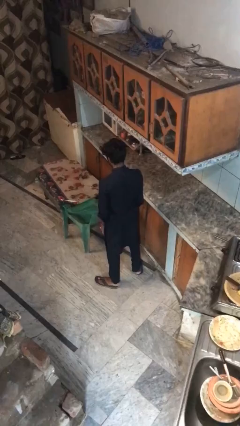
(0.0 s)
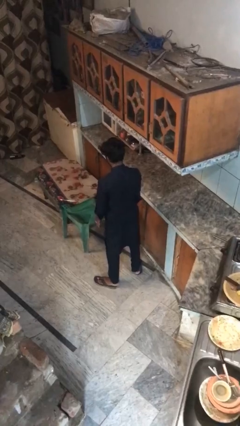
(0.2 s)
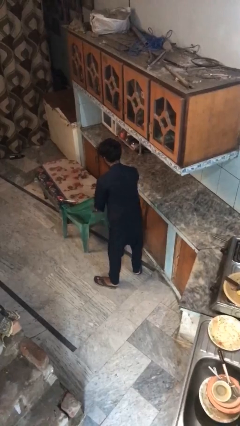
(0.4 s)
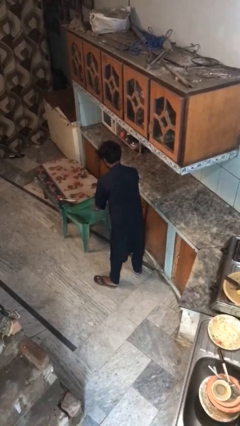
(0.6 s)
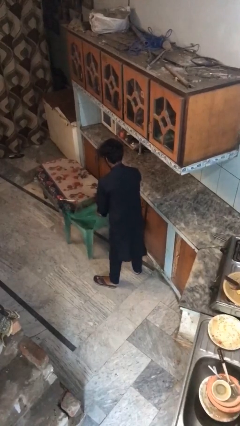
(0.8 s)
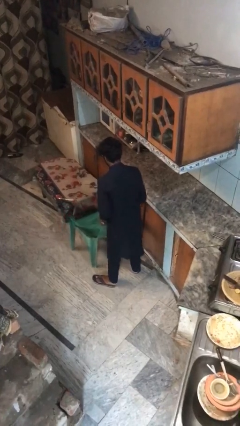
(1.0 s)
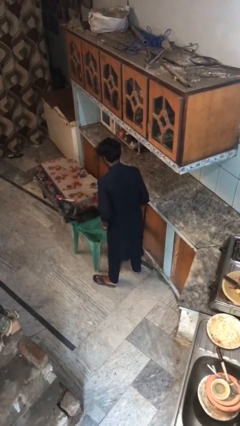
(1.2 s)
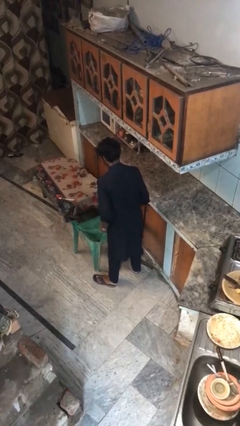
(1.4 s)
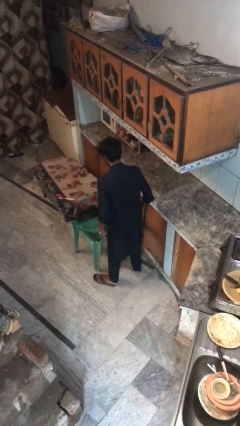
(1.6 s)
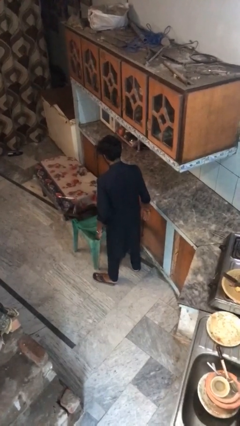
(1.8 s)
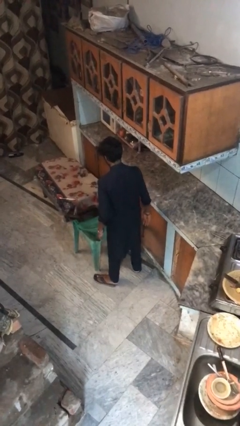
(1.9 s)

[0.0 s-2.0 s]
person pulls out chair

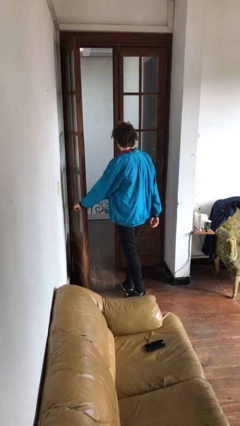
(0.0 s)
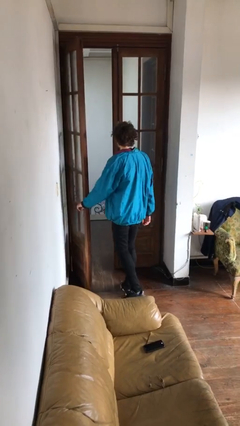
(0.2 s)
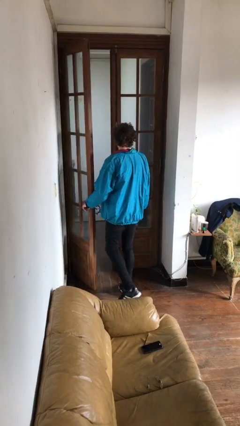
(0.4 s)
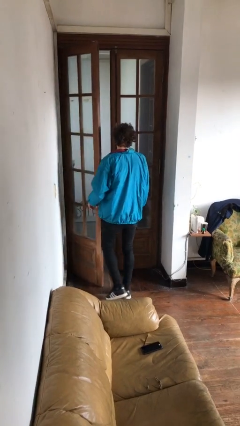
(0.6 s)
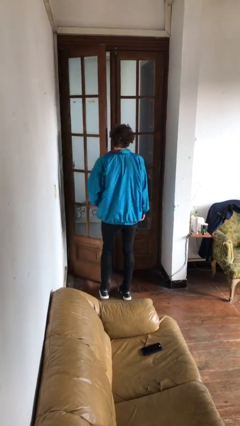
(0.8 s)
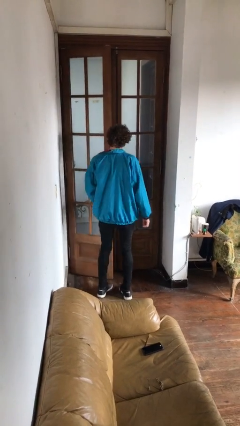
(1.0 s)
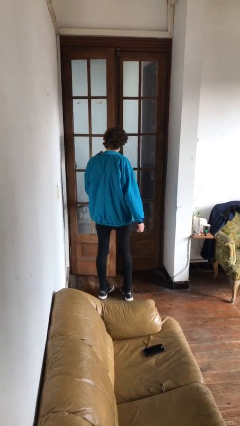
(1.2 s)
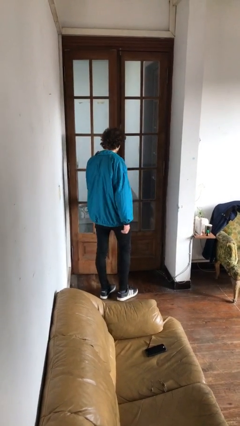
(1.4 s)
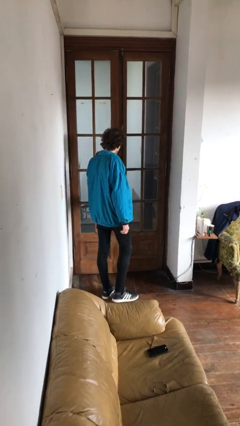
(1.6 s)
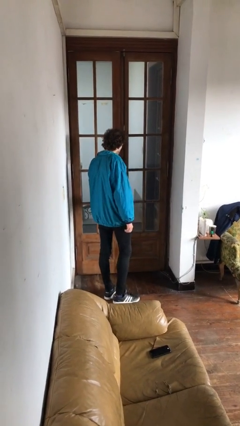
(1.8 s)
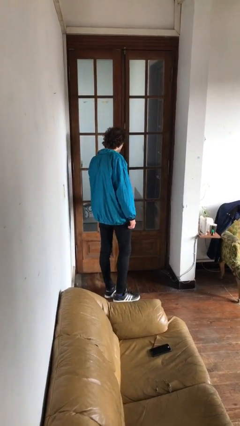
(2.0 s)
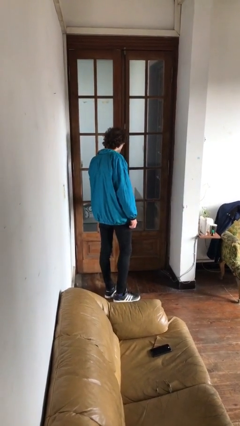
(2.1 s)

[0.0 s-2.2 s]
person closes facility door

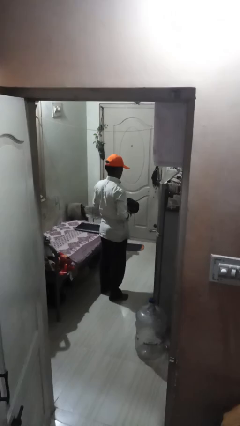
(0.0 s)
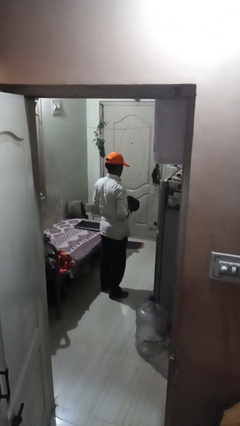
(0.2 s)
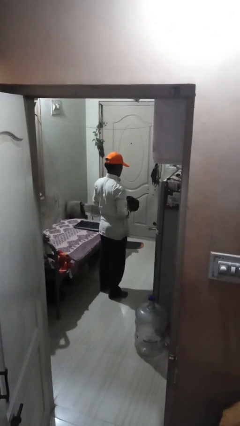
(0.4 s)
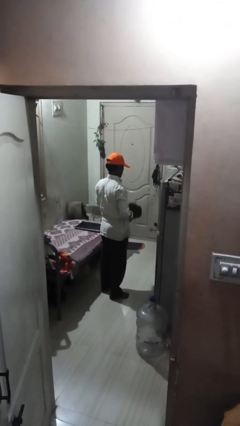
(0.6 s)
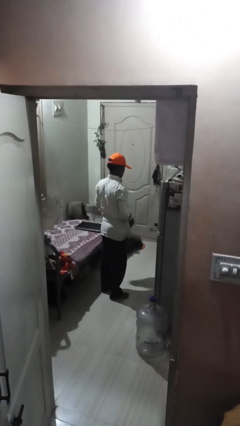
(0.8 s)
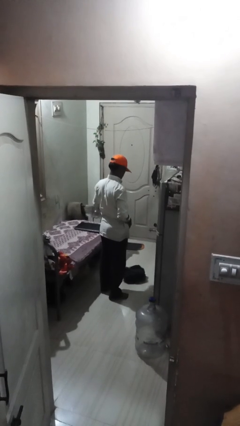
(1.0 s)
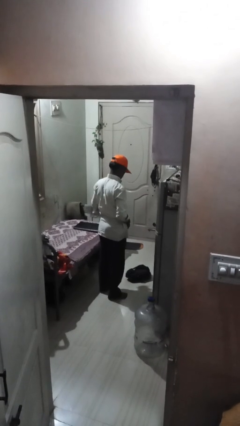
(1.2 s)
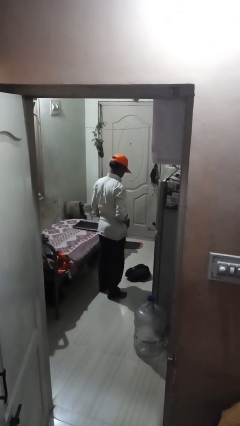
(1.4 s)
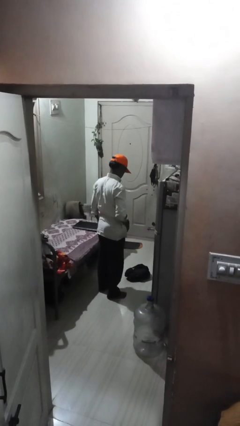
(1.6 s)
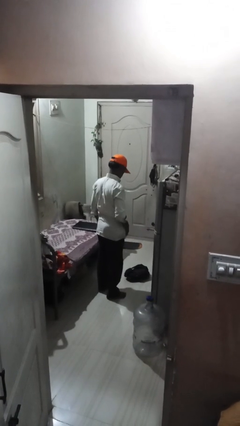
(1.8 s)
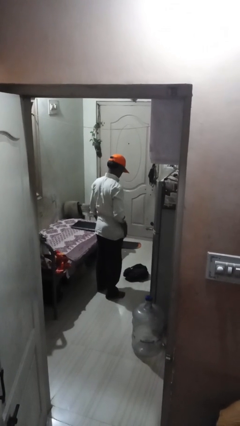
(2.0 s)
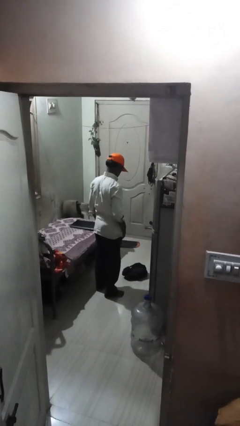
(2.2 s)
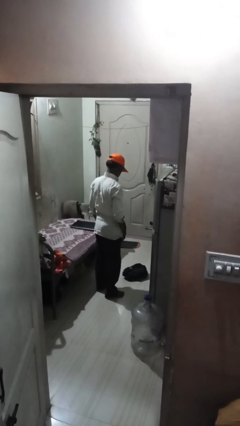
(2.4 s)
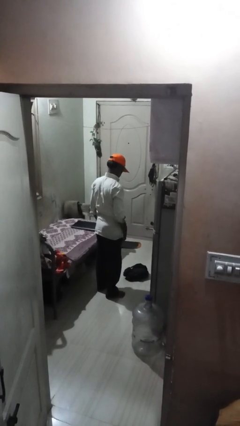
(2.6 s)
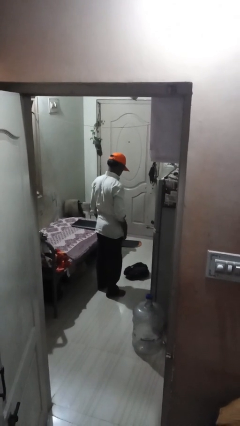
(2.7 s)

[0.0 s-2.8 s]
person drops object

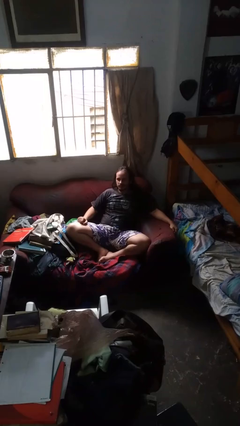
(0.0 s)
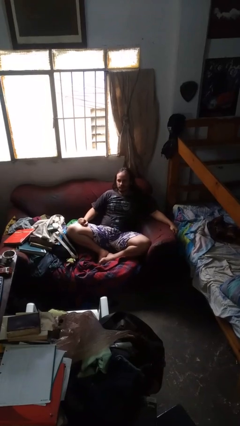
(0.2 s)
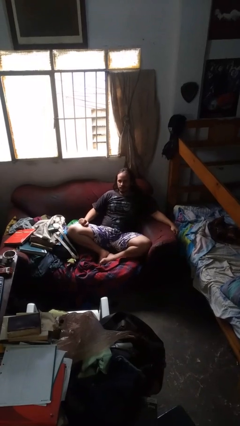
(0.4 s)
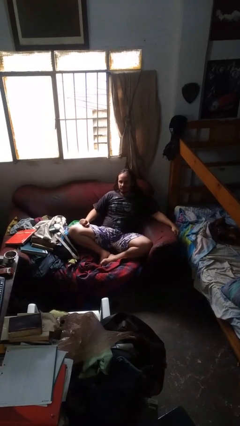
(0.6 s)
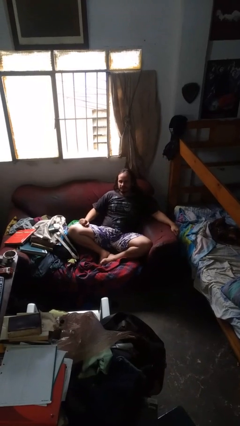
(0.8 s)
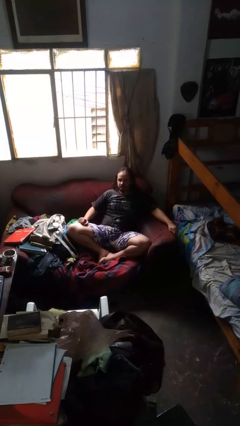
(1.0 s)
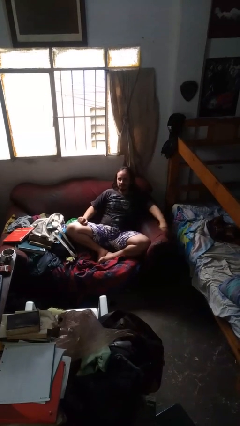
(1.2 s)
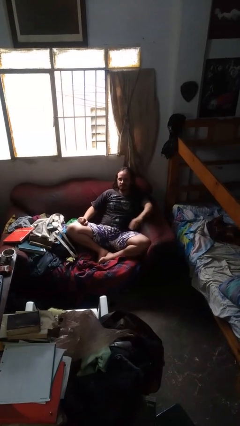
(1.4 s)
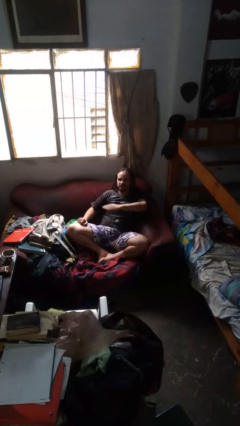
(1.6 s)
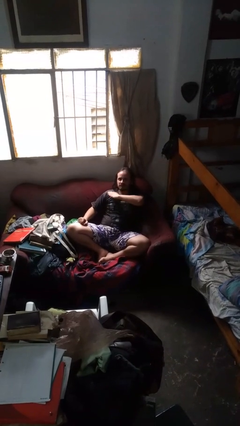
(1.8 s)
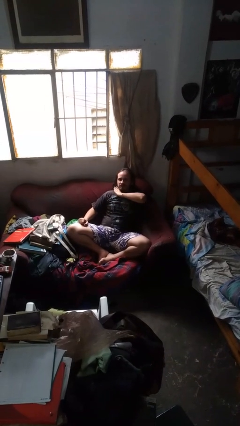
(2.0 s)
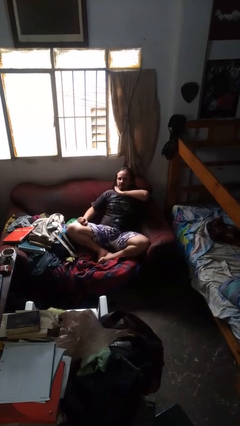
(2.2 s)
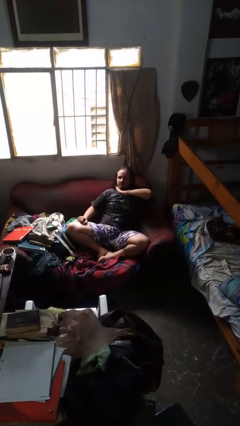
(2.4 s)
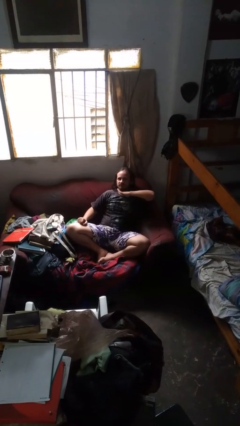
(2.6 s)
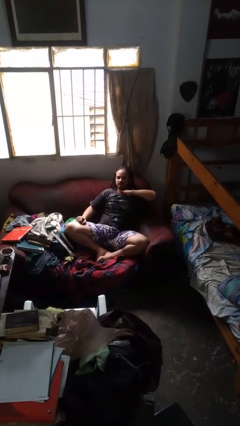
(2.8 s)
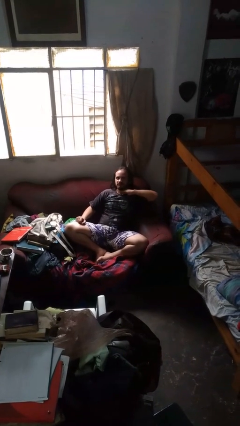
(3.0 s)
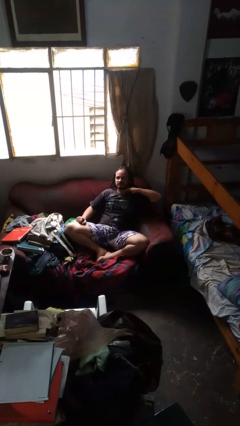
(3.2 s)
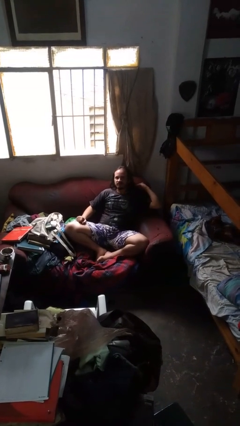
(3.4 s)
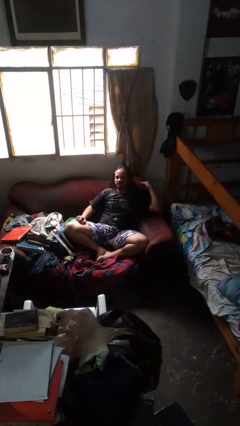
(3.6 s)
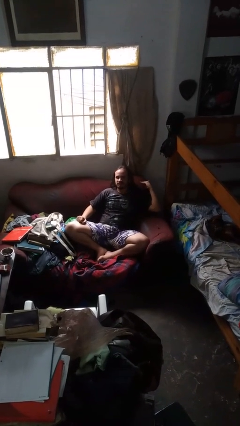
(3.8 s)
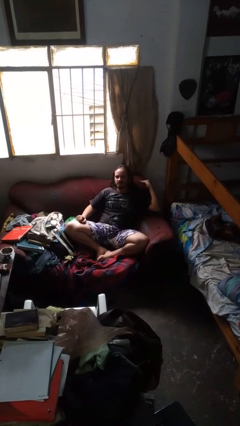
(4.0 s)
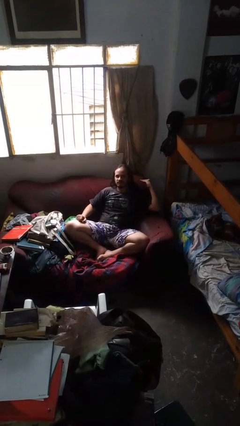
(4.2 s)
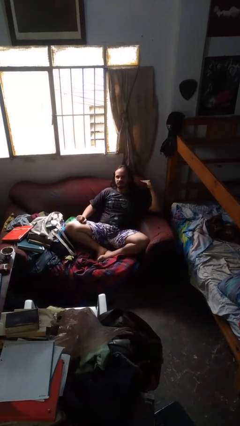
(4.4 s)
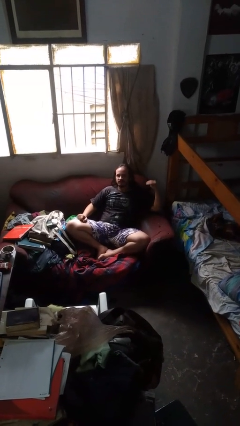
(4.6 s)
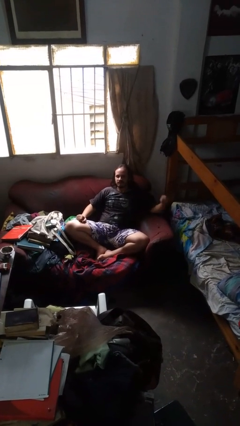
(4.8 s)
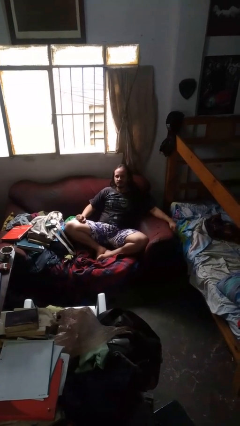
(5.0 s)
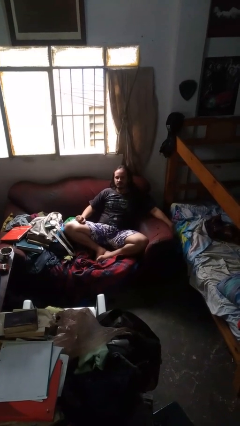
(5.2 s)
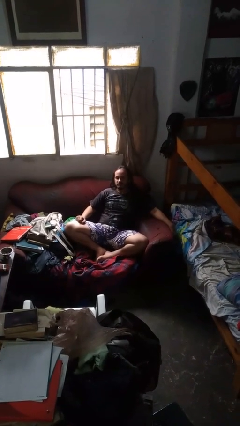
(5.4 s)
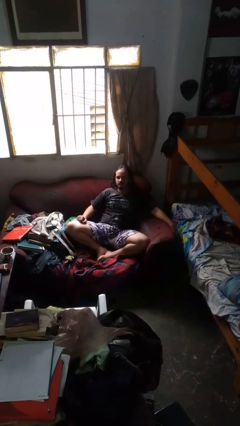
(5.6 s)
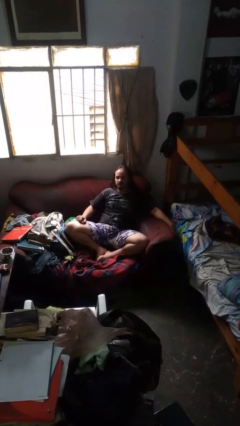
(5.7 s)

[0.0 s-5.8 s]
person gestures cut

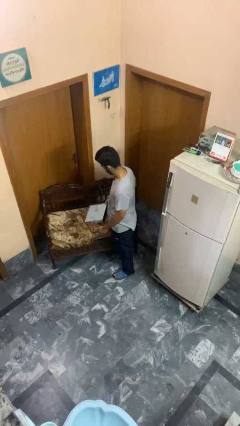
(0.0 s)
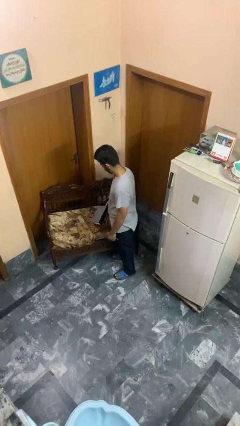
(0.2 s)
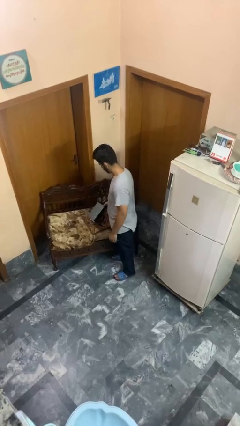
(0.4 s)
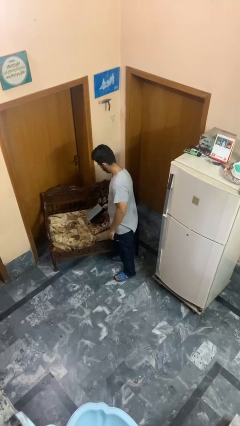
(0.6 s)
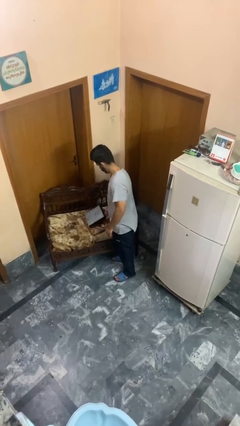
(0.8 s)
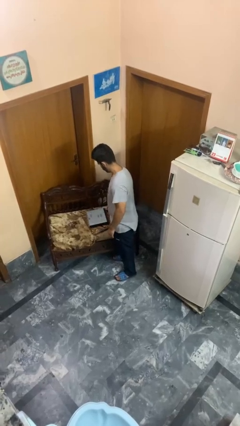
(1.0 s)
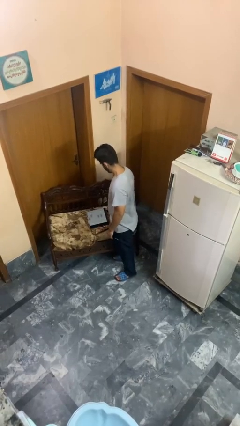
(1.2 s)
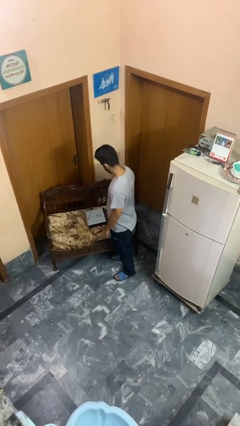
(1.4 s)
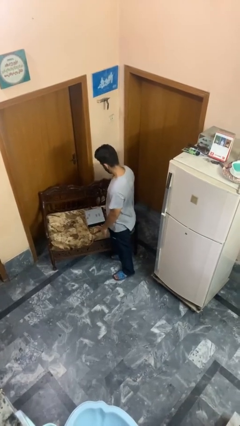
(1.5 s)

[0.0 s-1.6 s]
person puts down object on couch

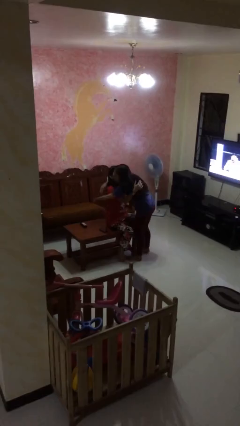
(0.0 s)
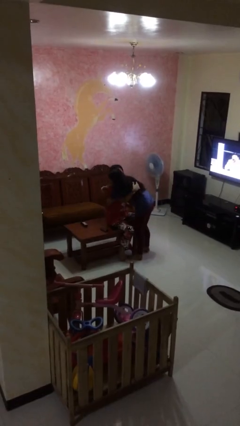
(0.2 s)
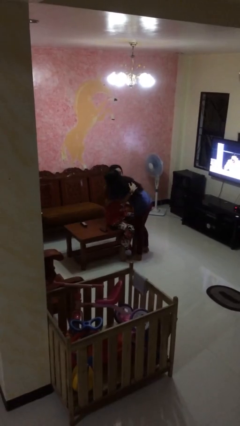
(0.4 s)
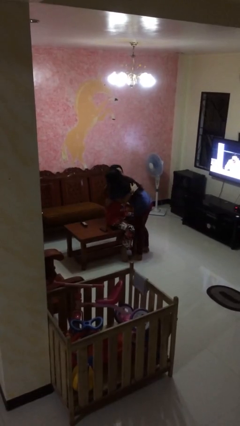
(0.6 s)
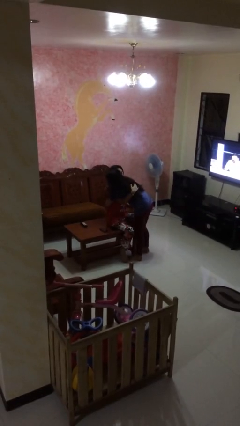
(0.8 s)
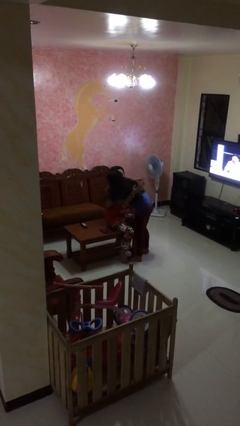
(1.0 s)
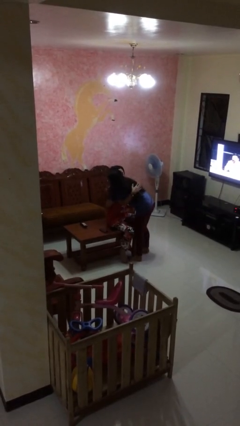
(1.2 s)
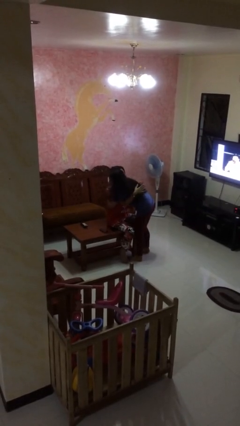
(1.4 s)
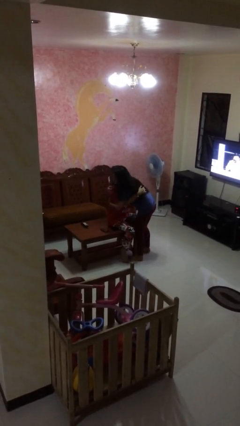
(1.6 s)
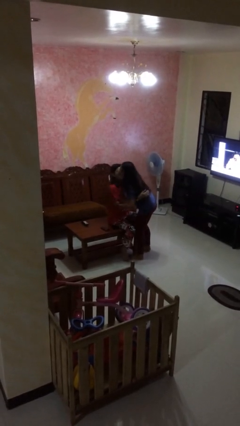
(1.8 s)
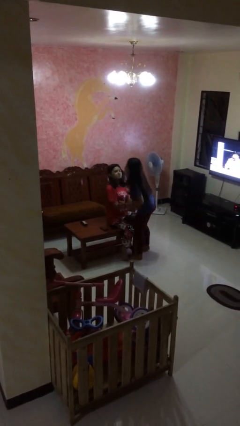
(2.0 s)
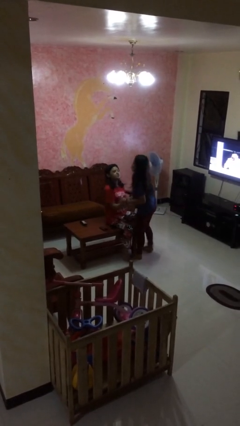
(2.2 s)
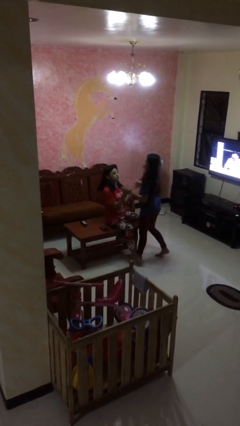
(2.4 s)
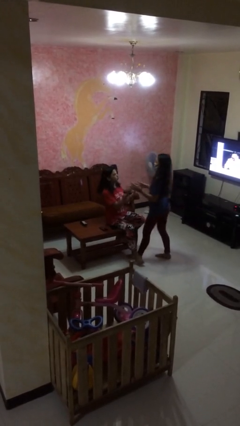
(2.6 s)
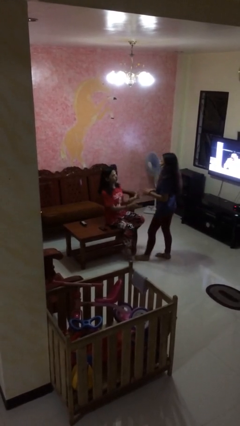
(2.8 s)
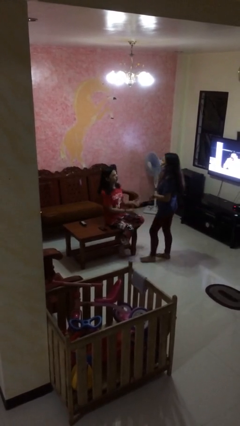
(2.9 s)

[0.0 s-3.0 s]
person embraces person
